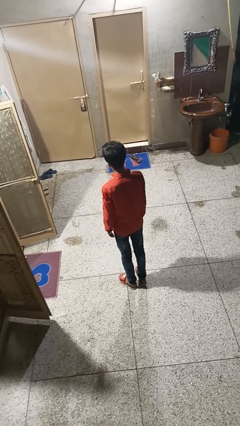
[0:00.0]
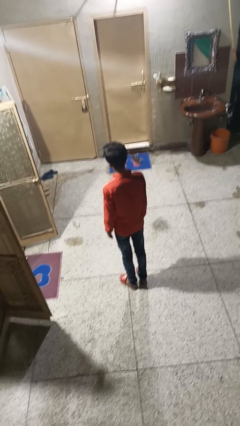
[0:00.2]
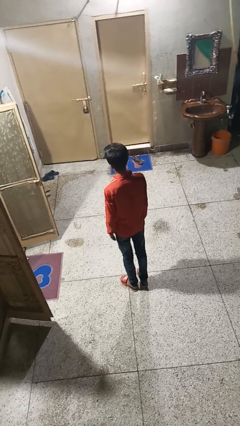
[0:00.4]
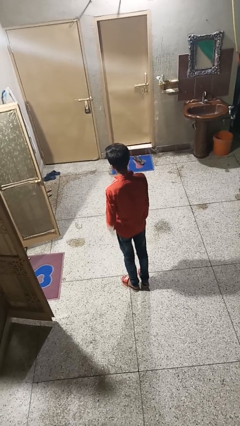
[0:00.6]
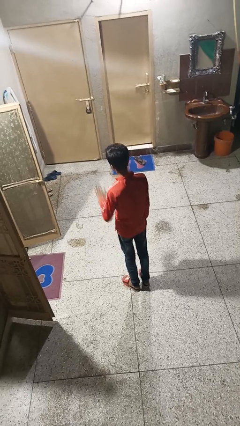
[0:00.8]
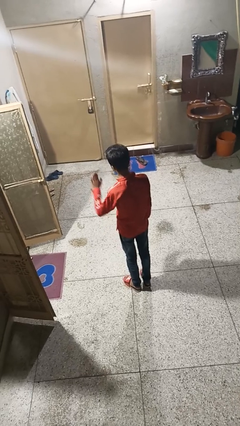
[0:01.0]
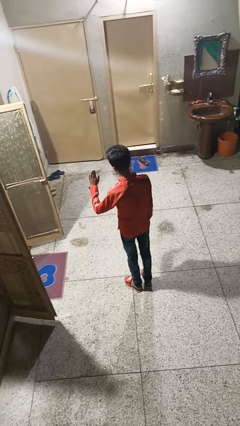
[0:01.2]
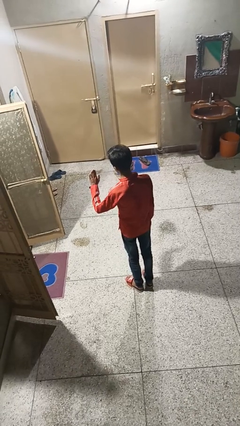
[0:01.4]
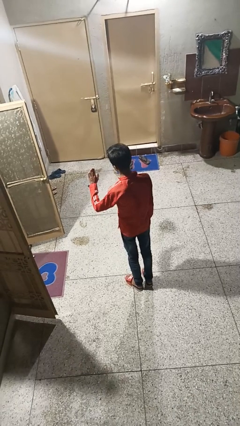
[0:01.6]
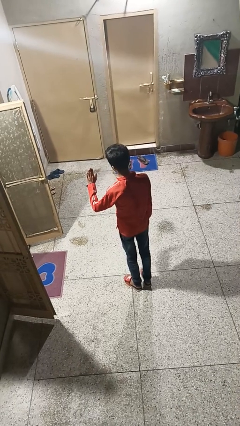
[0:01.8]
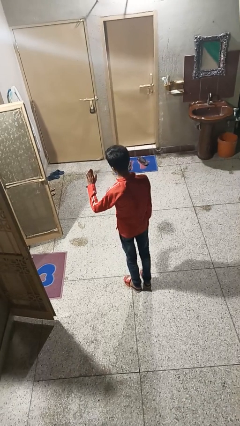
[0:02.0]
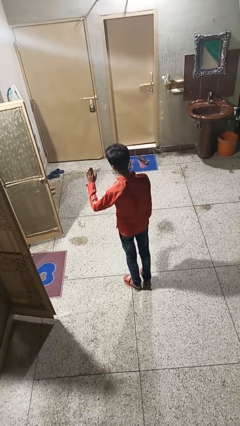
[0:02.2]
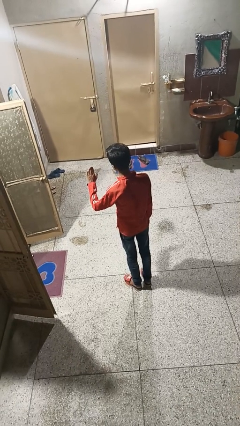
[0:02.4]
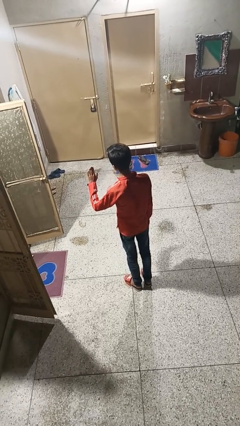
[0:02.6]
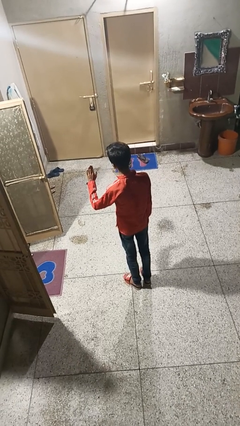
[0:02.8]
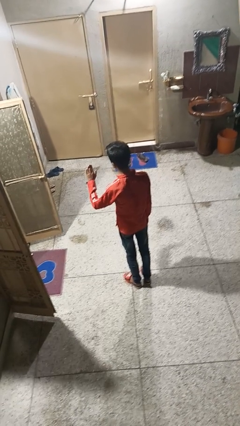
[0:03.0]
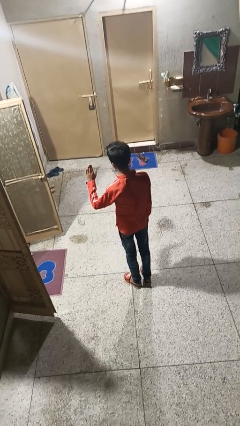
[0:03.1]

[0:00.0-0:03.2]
person gestures stop

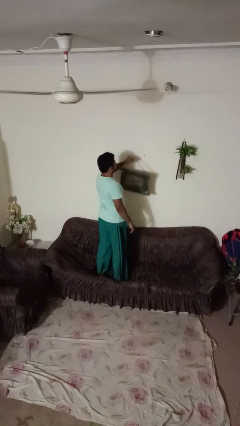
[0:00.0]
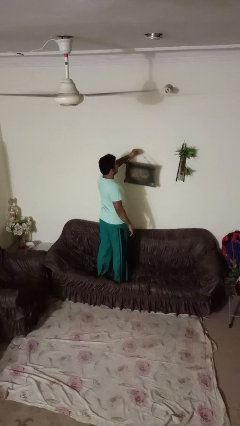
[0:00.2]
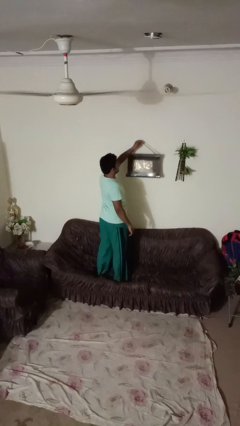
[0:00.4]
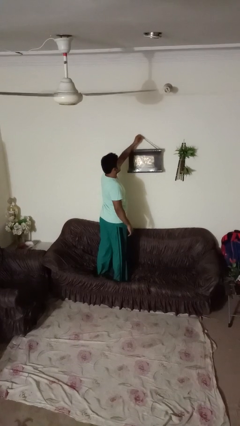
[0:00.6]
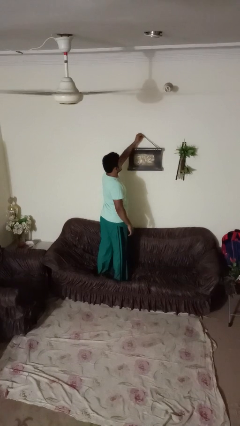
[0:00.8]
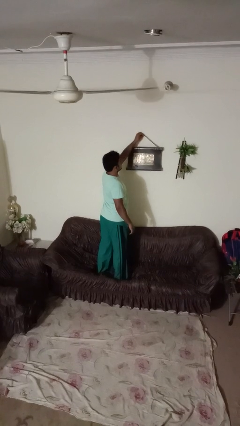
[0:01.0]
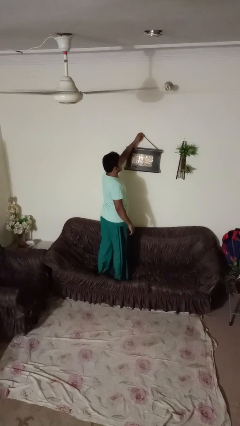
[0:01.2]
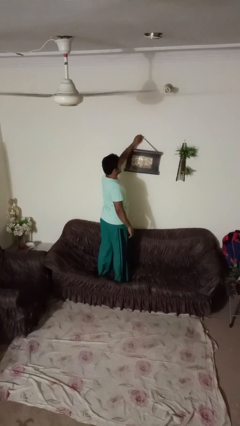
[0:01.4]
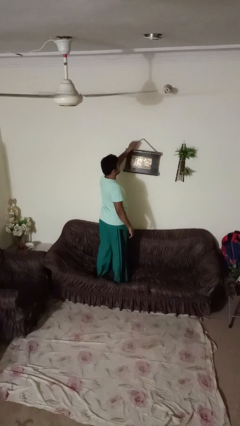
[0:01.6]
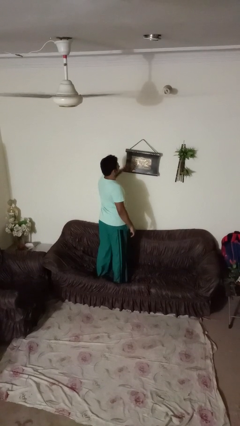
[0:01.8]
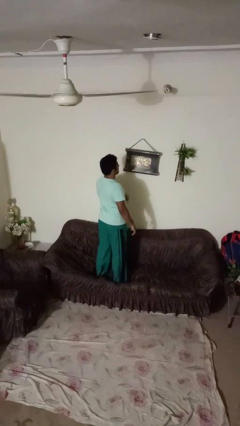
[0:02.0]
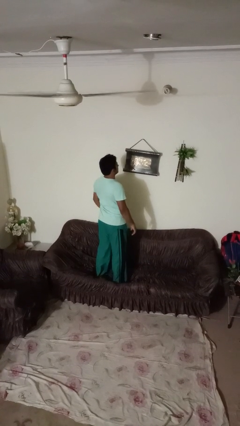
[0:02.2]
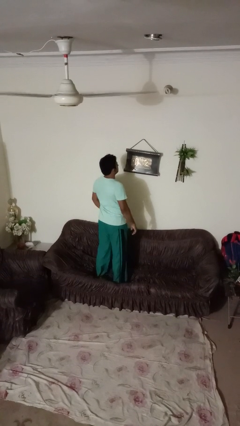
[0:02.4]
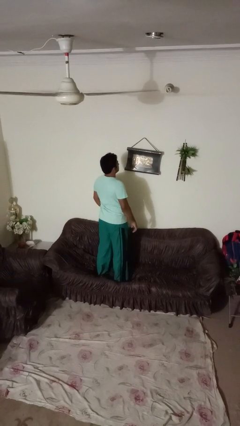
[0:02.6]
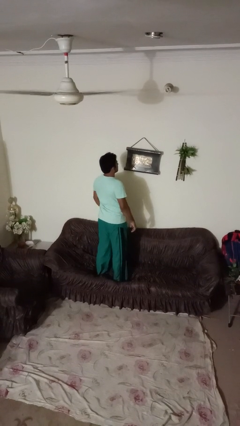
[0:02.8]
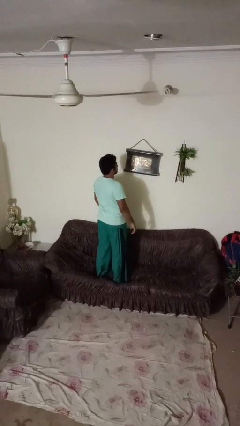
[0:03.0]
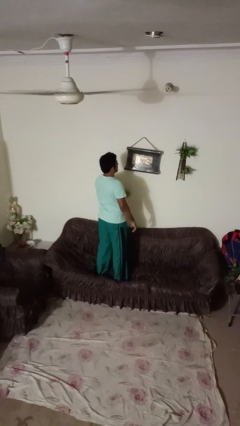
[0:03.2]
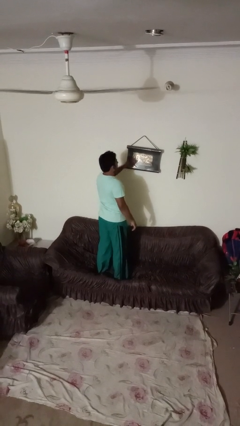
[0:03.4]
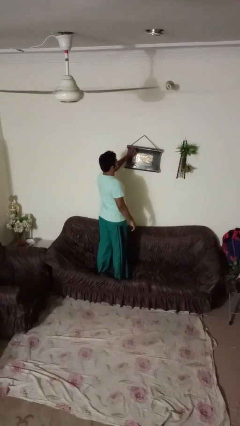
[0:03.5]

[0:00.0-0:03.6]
person puts up picture frame

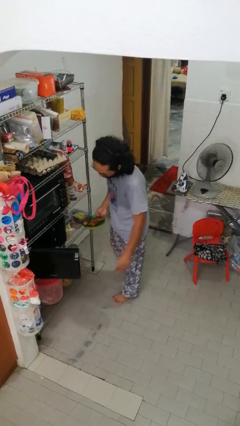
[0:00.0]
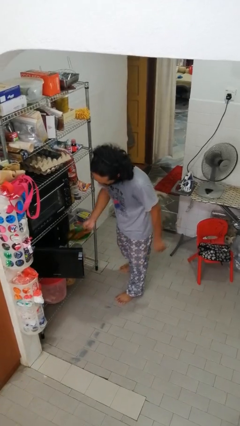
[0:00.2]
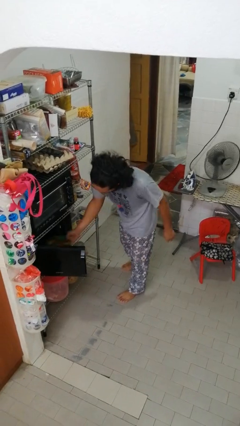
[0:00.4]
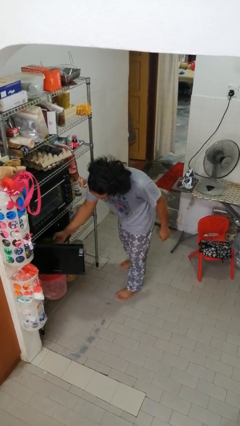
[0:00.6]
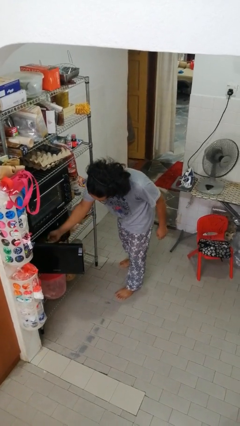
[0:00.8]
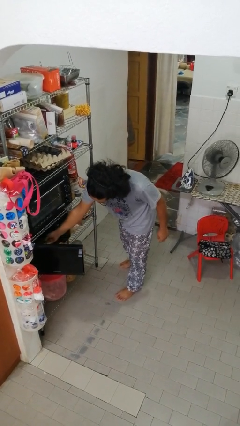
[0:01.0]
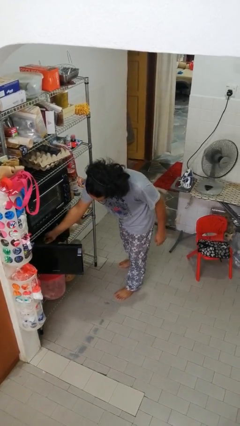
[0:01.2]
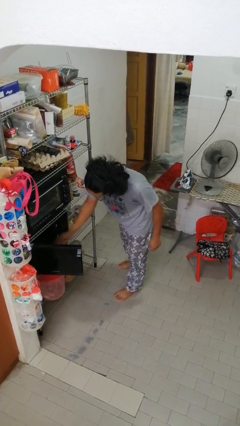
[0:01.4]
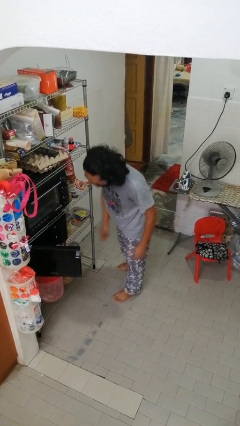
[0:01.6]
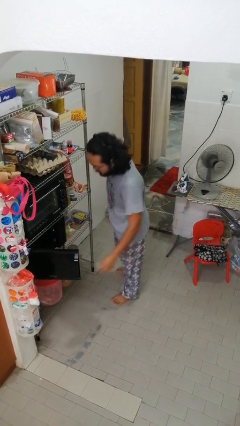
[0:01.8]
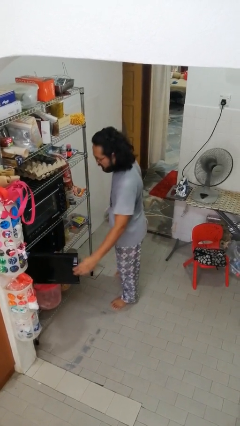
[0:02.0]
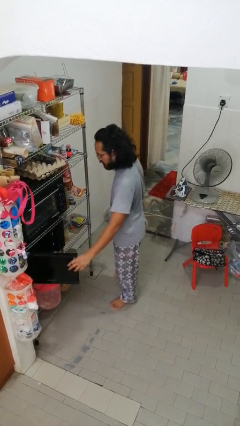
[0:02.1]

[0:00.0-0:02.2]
person puts object into microwave

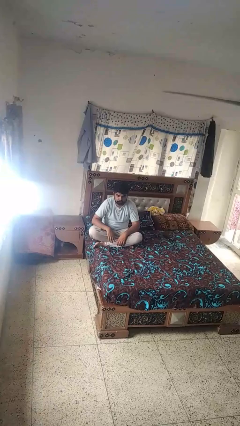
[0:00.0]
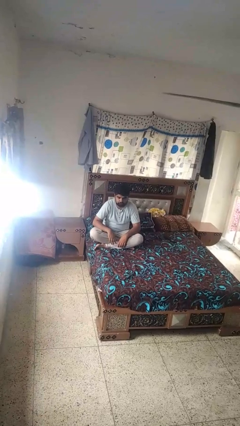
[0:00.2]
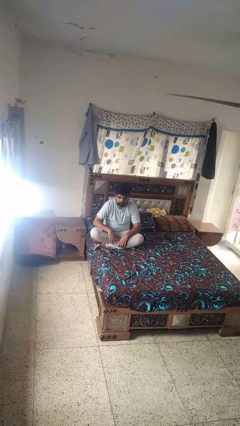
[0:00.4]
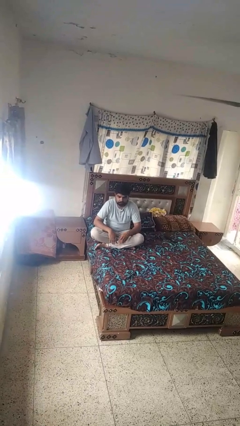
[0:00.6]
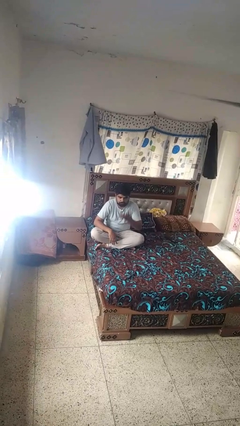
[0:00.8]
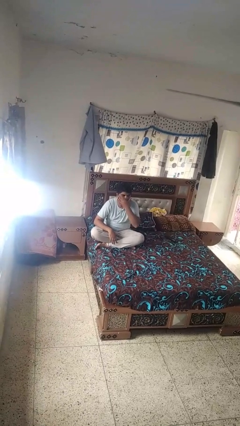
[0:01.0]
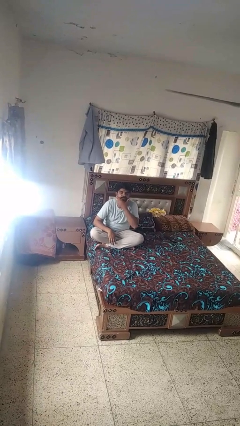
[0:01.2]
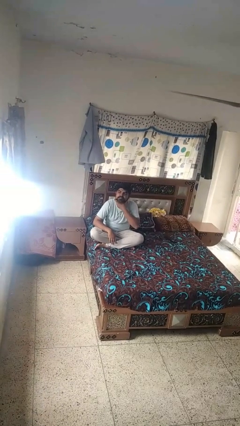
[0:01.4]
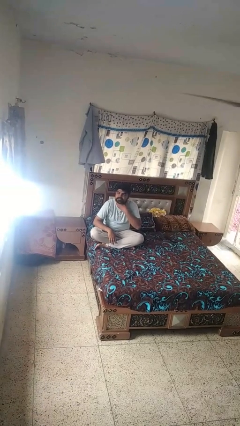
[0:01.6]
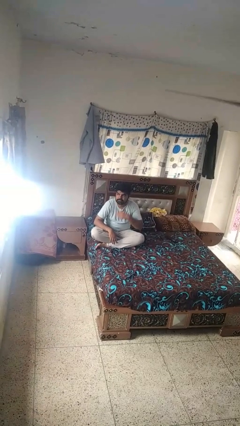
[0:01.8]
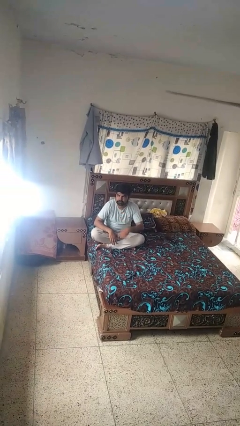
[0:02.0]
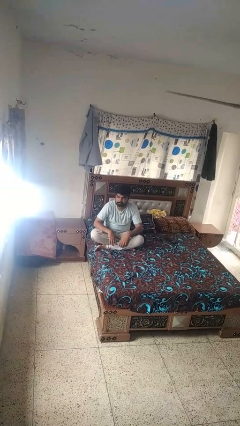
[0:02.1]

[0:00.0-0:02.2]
person scratches face

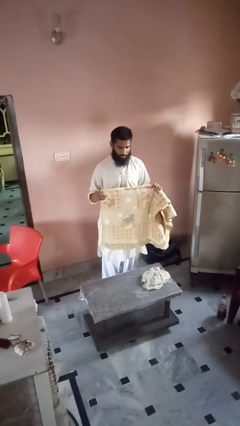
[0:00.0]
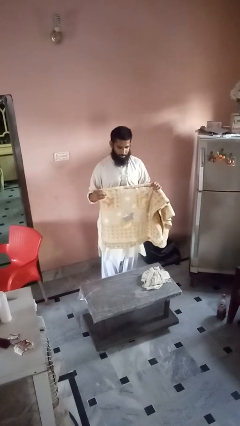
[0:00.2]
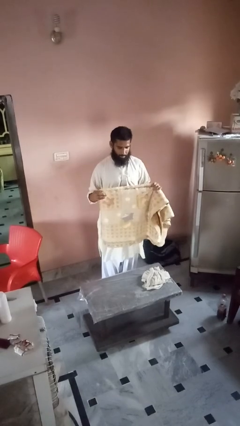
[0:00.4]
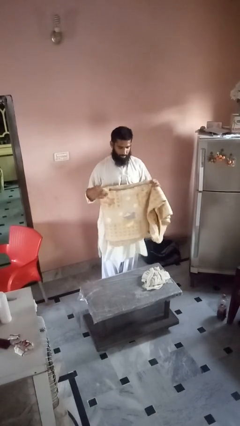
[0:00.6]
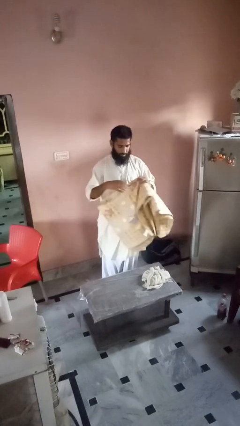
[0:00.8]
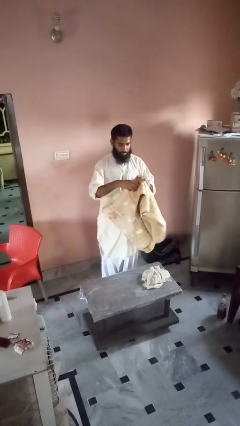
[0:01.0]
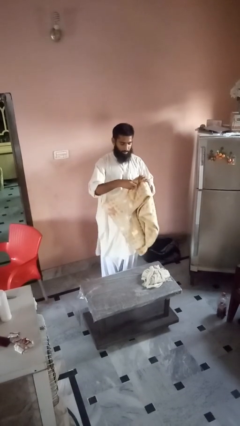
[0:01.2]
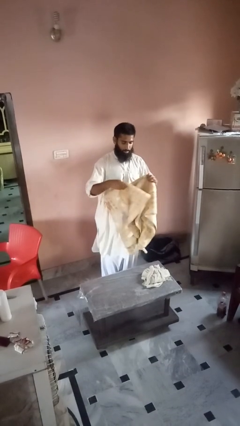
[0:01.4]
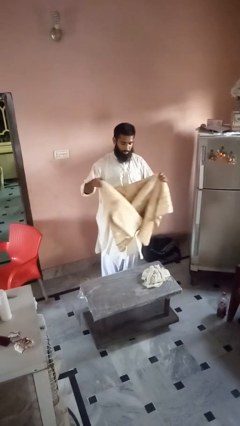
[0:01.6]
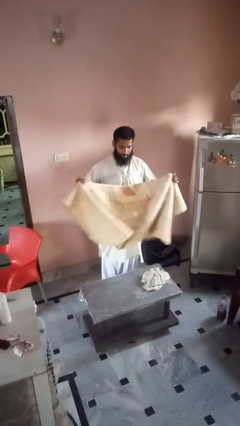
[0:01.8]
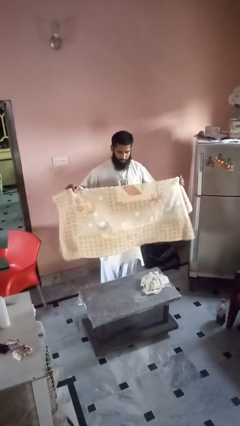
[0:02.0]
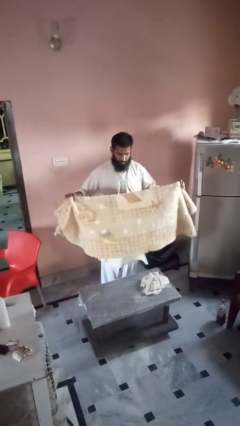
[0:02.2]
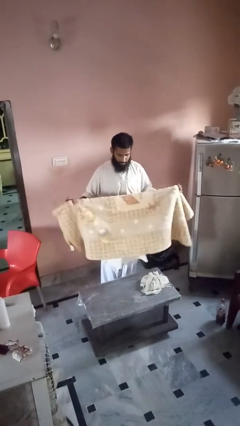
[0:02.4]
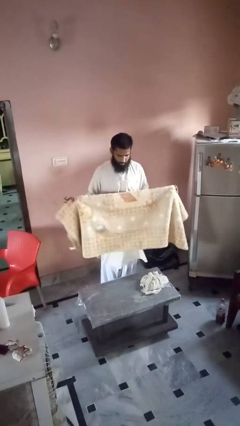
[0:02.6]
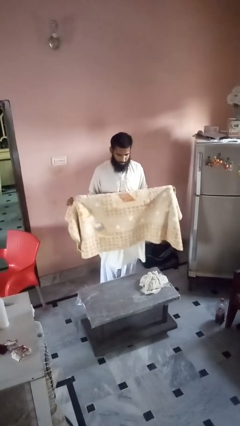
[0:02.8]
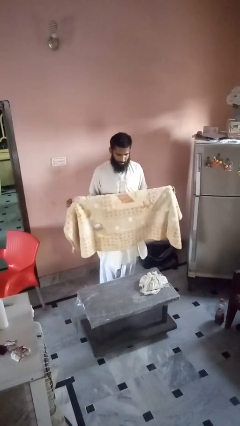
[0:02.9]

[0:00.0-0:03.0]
person unfolds blanket

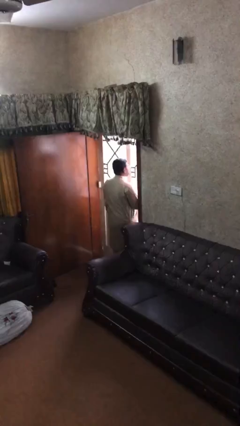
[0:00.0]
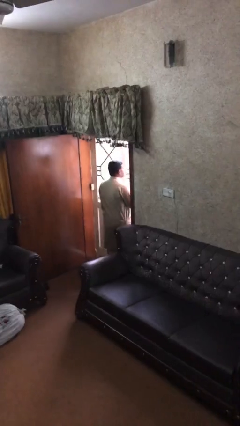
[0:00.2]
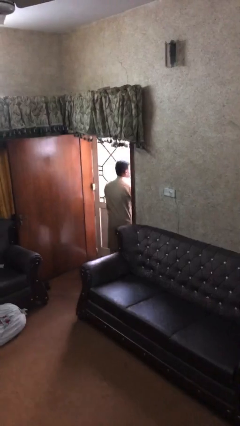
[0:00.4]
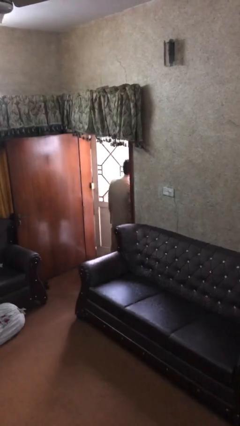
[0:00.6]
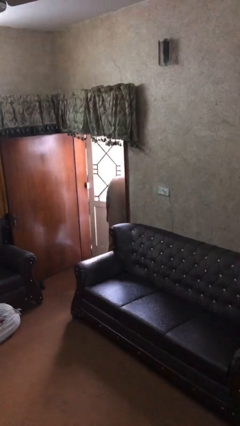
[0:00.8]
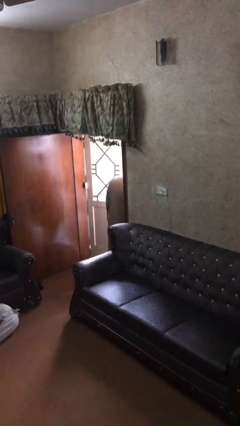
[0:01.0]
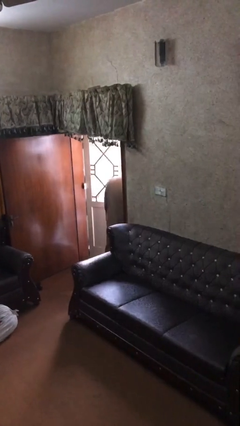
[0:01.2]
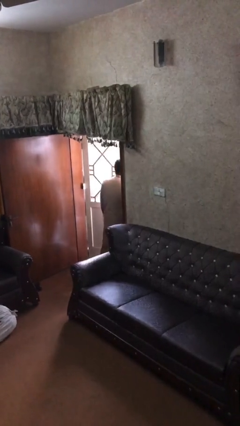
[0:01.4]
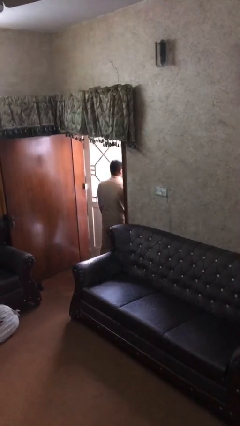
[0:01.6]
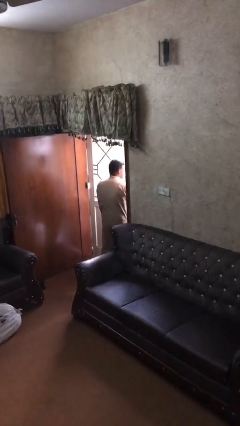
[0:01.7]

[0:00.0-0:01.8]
person opens facility door

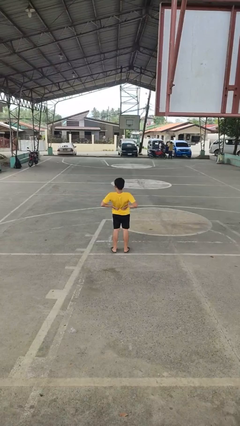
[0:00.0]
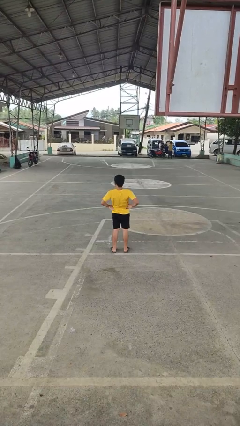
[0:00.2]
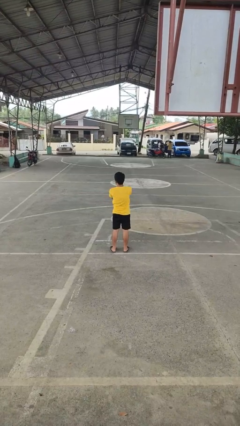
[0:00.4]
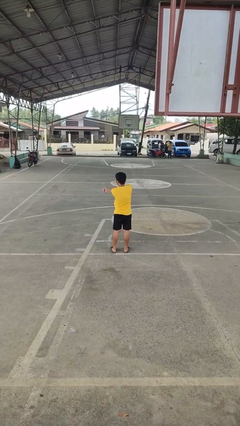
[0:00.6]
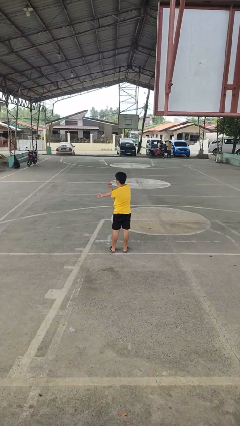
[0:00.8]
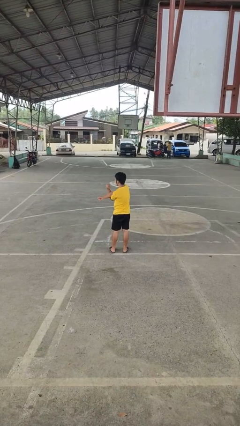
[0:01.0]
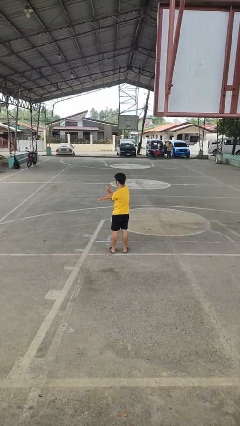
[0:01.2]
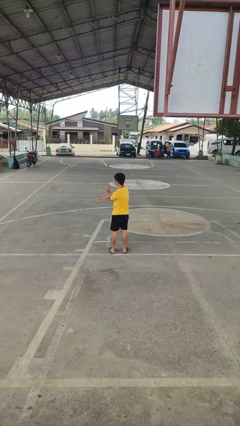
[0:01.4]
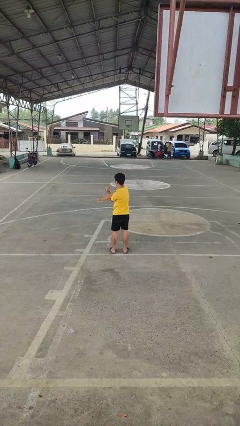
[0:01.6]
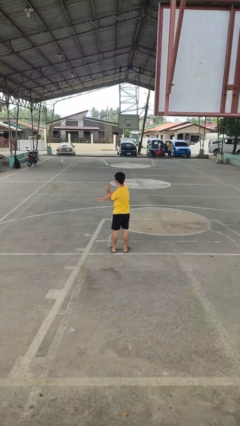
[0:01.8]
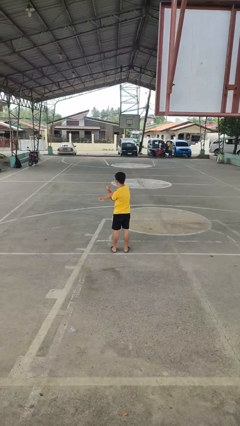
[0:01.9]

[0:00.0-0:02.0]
person stretches arms to side
